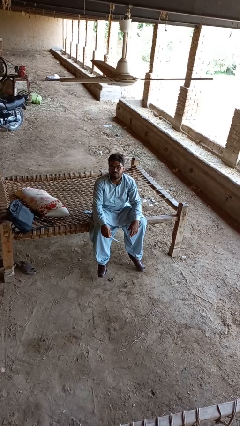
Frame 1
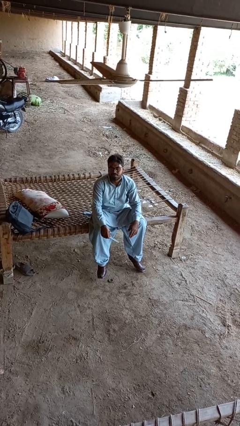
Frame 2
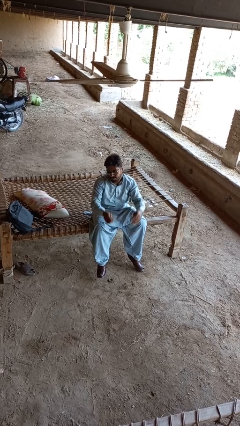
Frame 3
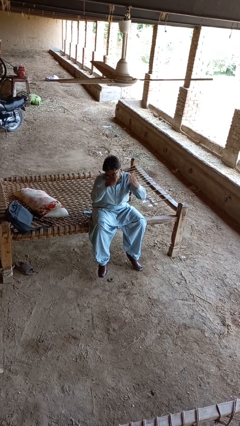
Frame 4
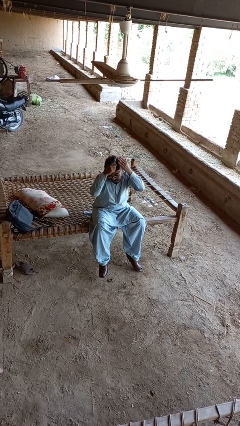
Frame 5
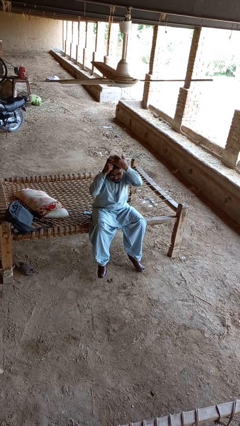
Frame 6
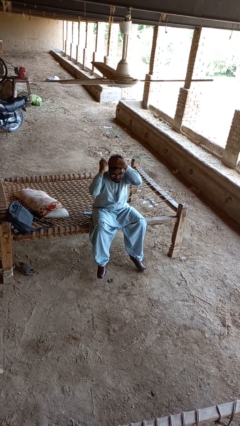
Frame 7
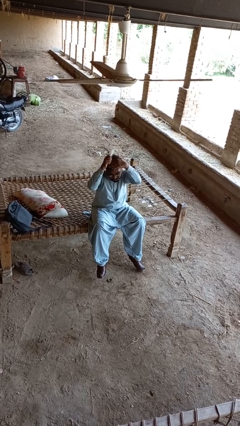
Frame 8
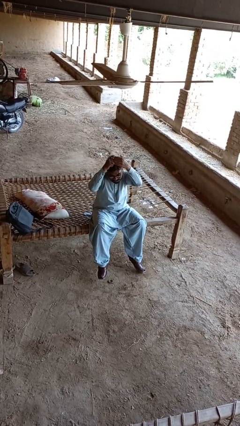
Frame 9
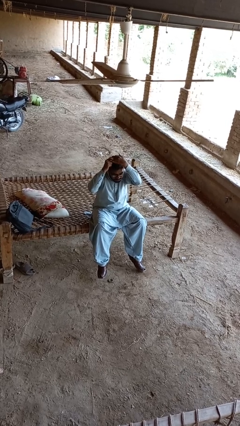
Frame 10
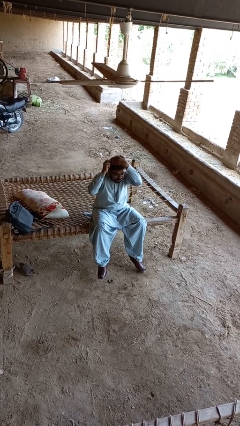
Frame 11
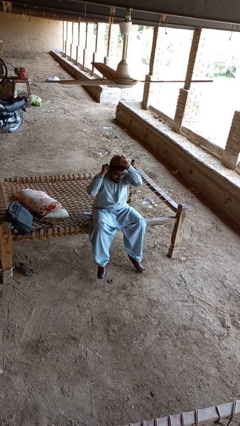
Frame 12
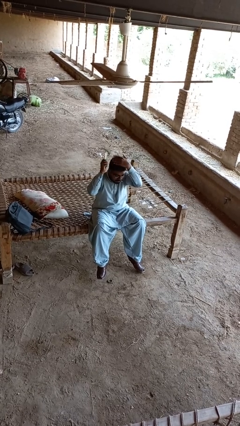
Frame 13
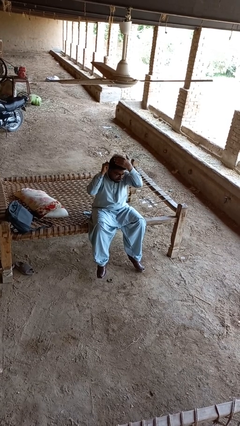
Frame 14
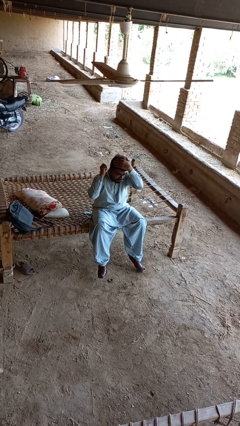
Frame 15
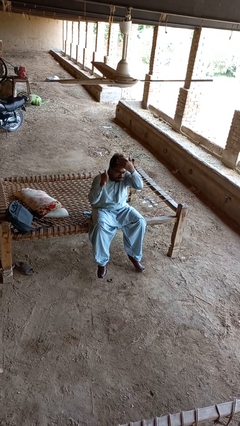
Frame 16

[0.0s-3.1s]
person brushes hair

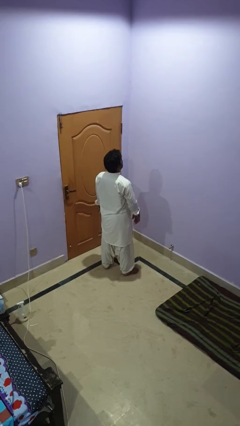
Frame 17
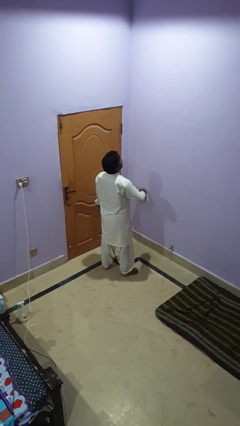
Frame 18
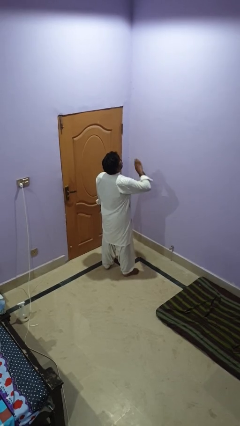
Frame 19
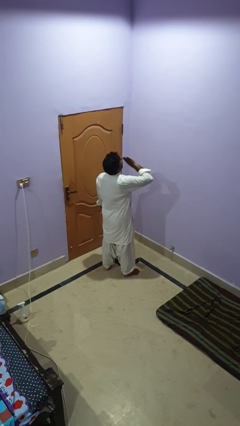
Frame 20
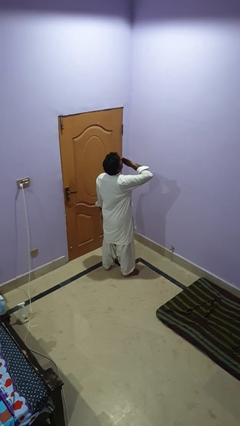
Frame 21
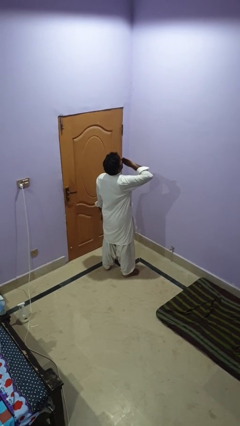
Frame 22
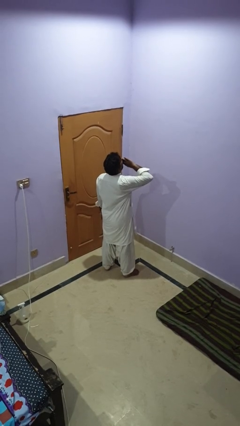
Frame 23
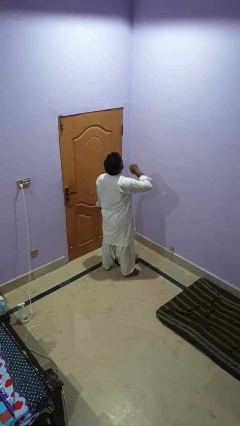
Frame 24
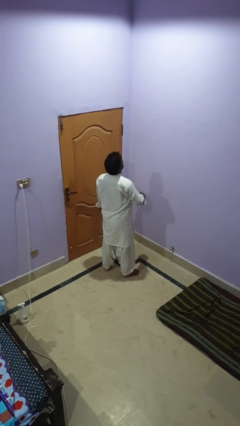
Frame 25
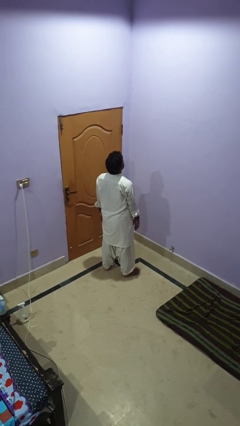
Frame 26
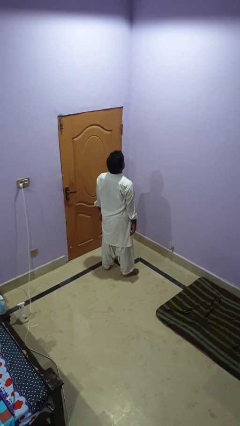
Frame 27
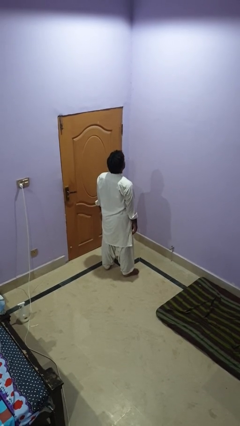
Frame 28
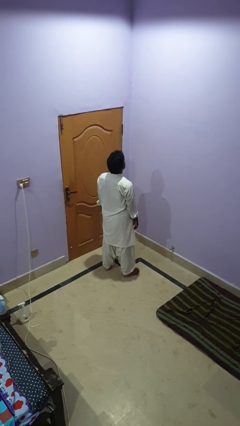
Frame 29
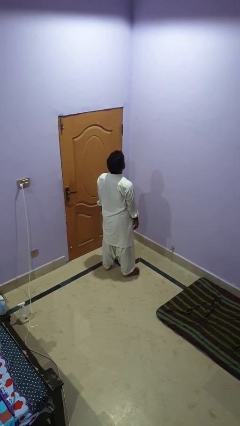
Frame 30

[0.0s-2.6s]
person yawns

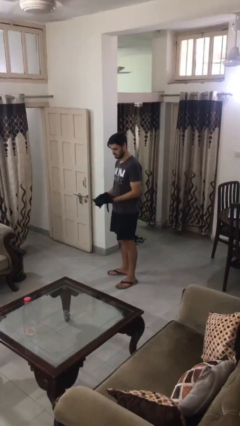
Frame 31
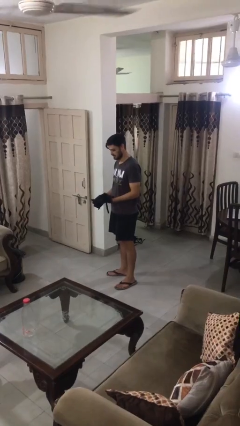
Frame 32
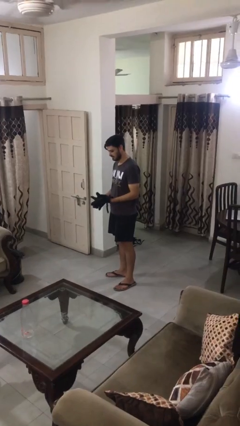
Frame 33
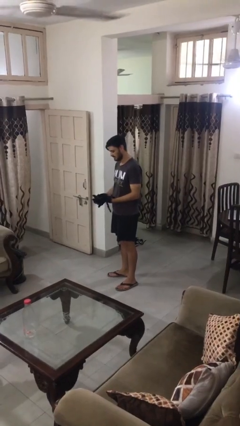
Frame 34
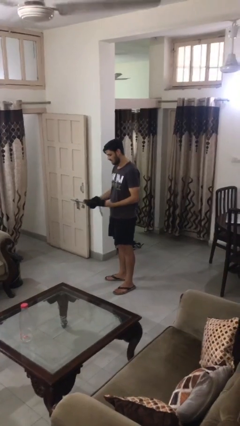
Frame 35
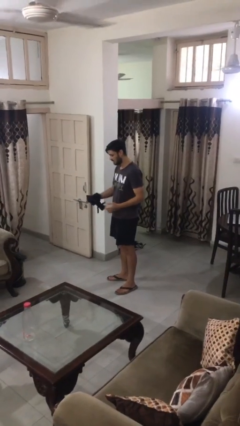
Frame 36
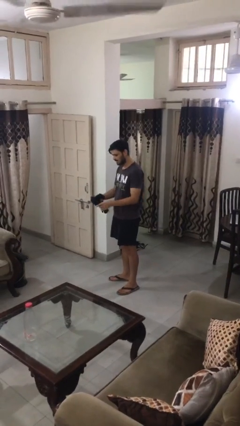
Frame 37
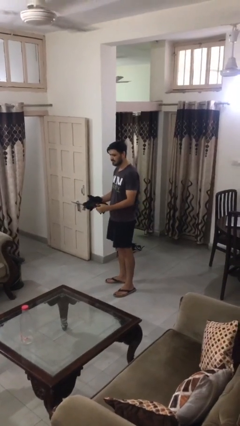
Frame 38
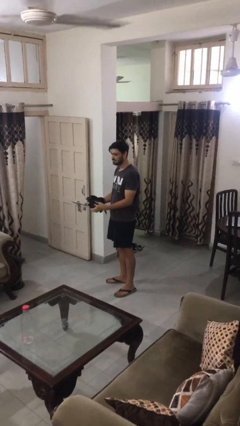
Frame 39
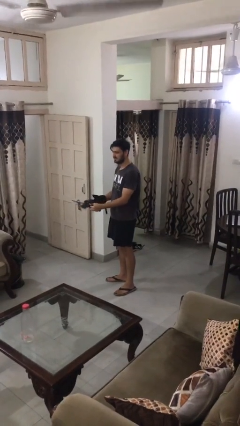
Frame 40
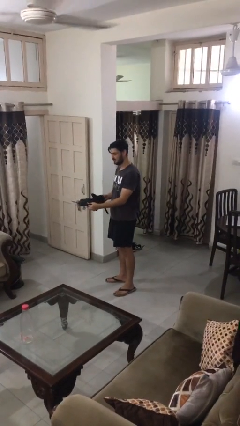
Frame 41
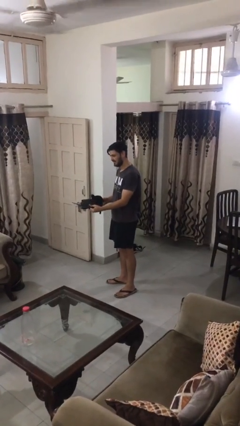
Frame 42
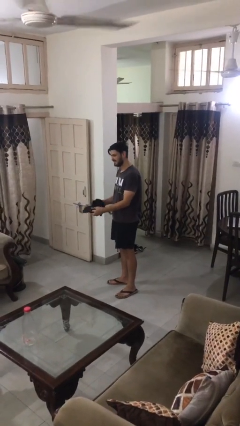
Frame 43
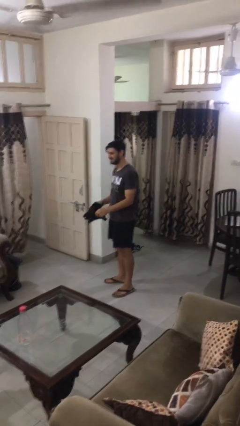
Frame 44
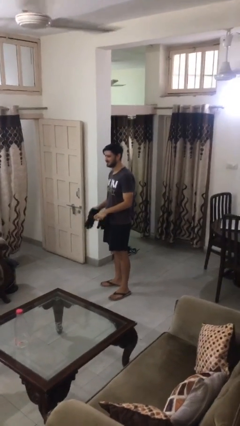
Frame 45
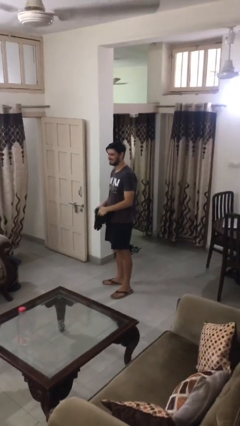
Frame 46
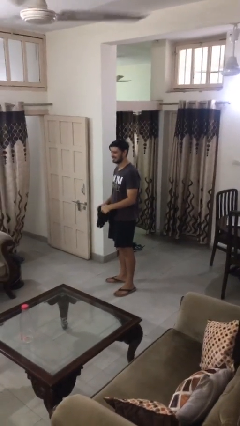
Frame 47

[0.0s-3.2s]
person takes off gloves

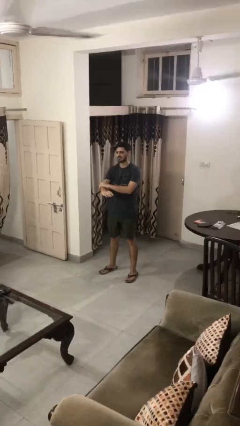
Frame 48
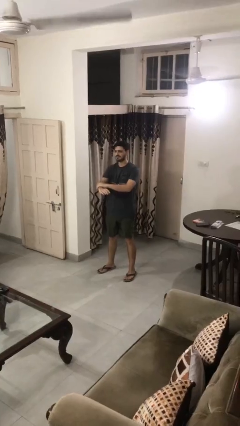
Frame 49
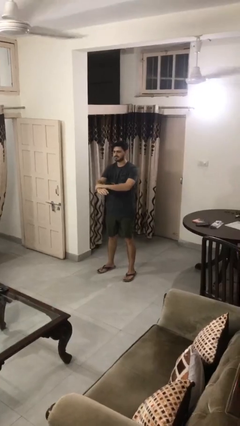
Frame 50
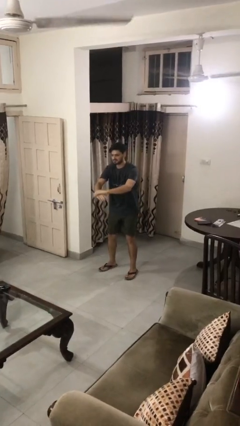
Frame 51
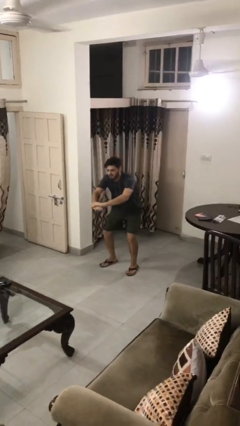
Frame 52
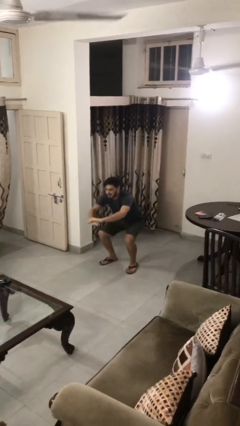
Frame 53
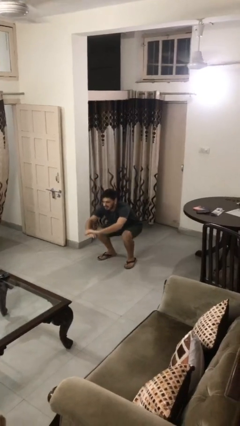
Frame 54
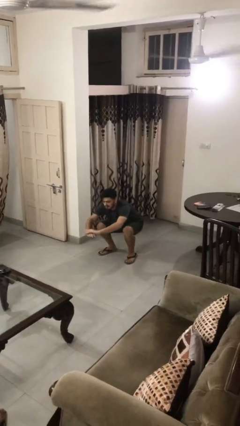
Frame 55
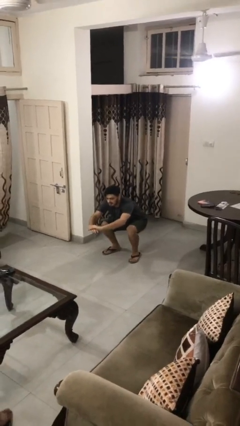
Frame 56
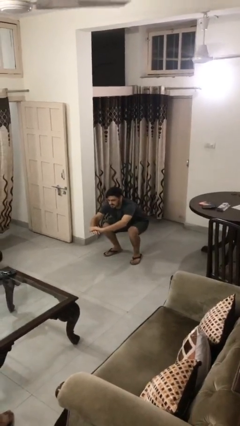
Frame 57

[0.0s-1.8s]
person squats

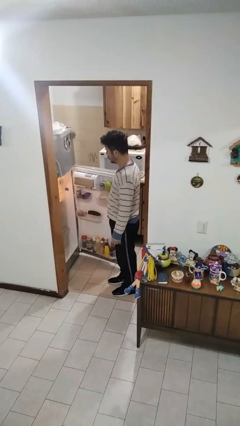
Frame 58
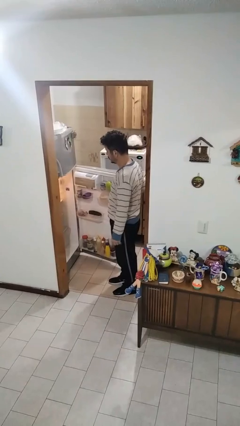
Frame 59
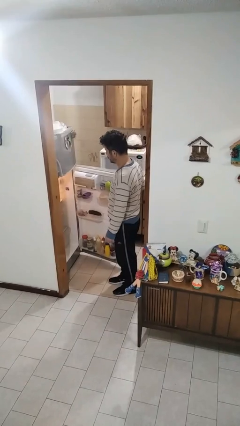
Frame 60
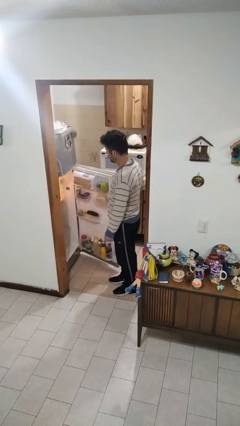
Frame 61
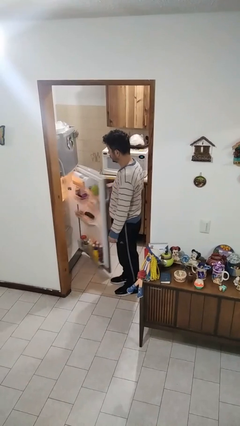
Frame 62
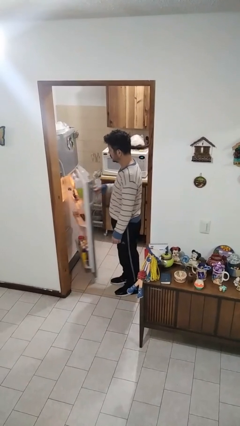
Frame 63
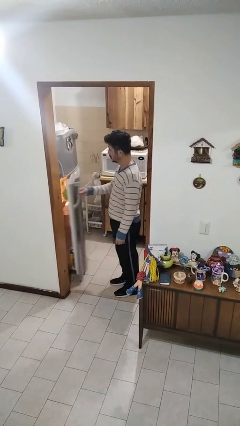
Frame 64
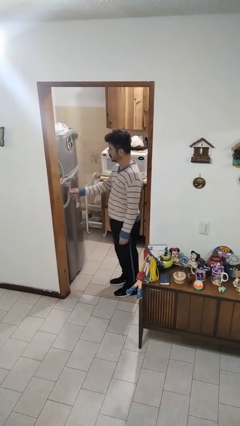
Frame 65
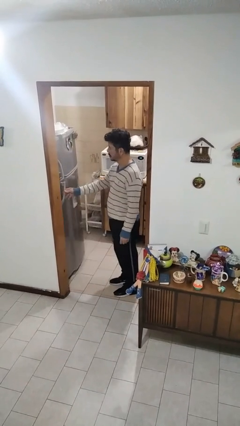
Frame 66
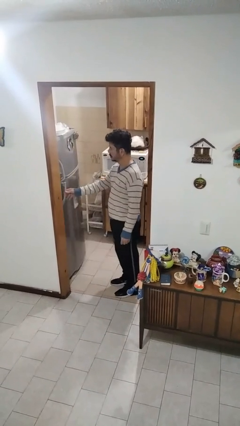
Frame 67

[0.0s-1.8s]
person closes refrigerator

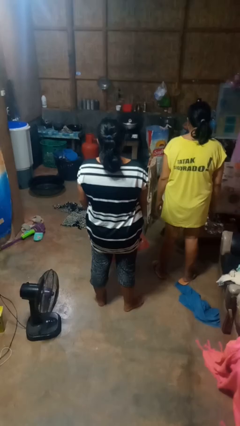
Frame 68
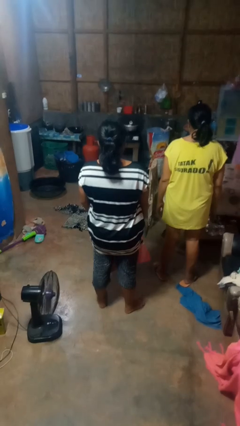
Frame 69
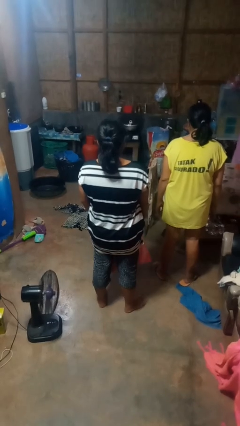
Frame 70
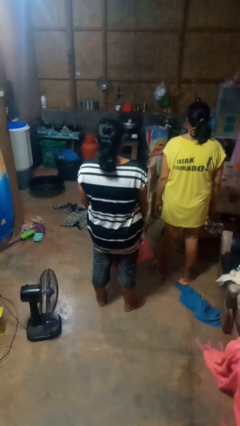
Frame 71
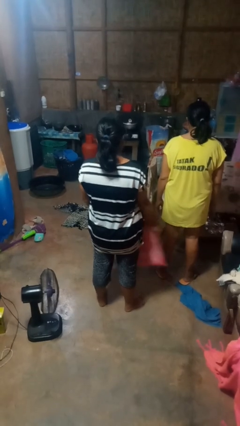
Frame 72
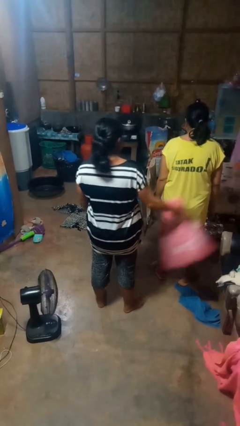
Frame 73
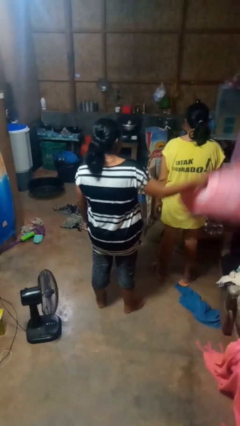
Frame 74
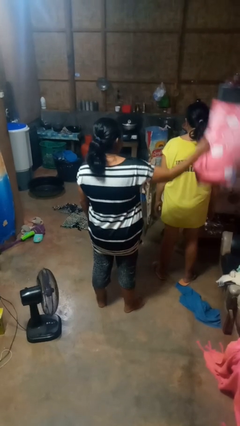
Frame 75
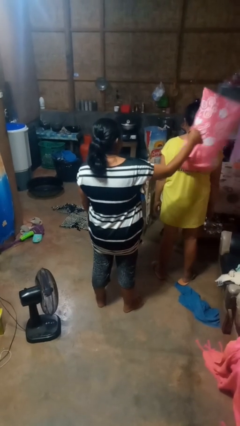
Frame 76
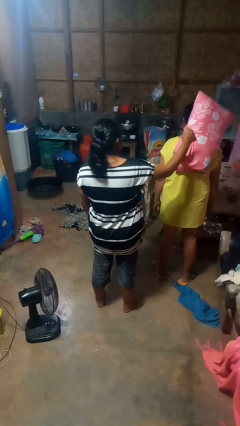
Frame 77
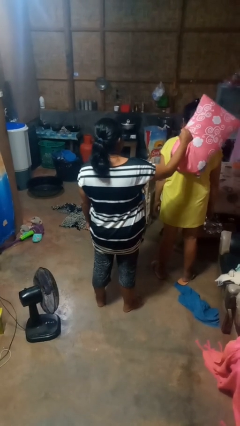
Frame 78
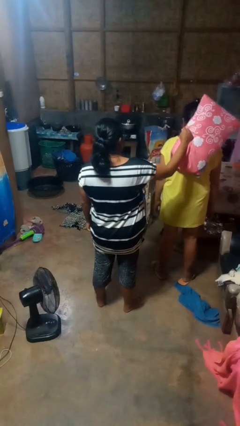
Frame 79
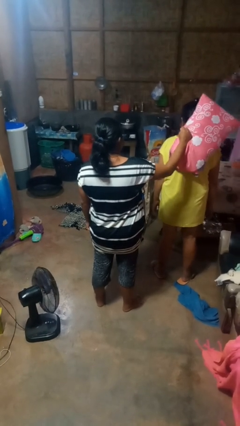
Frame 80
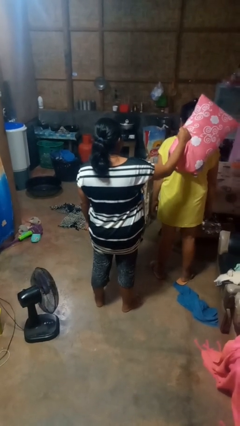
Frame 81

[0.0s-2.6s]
person hits person with pillow

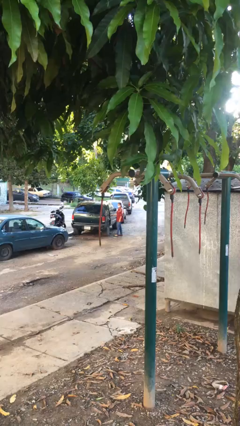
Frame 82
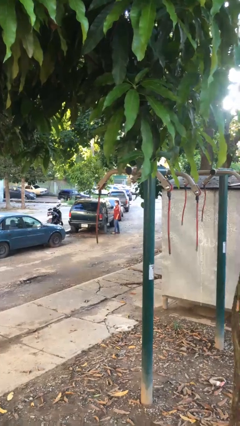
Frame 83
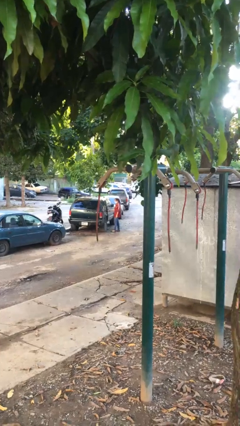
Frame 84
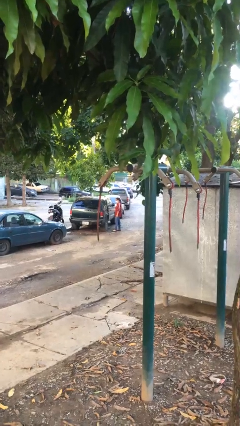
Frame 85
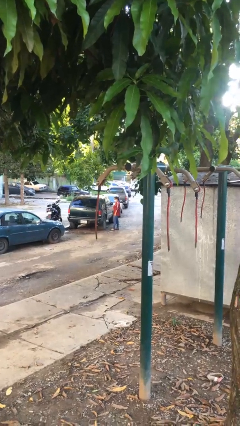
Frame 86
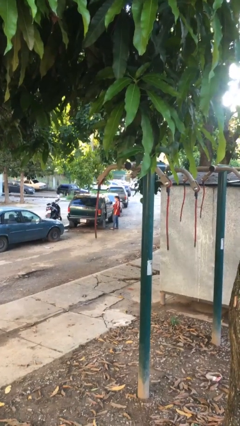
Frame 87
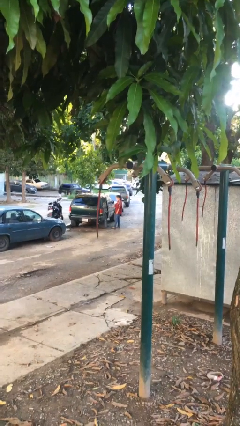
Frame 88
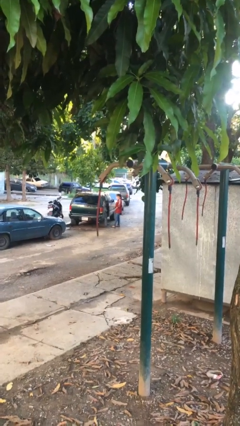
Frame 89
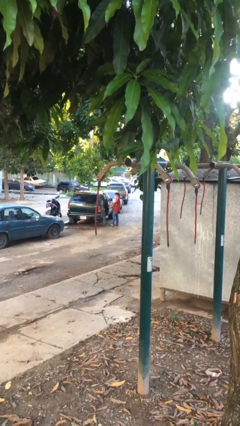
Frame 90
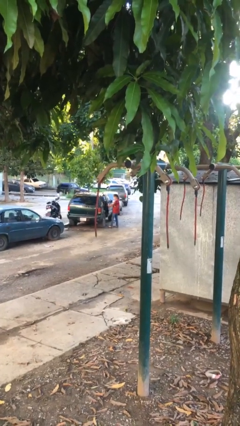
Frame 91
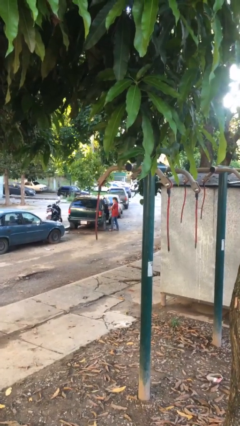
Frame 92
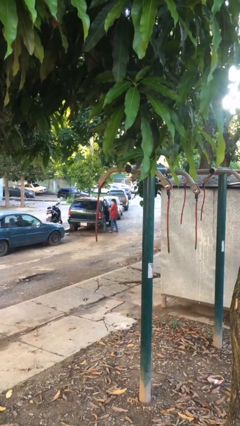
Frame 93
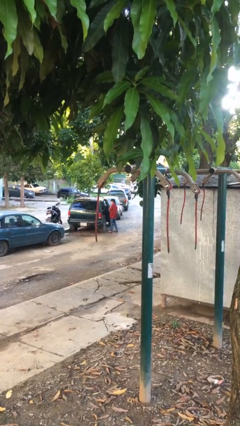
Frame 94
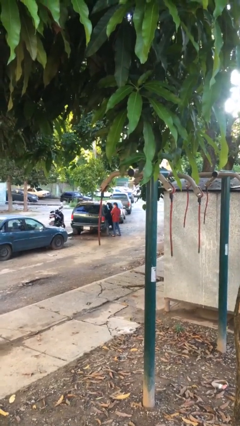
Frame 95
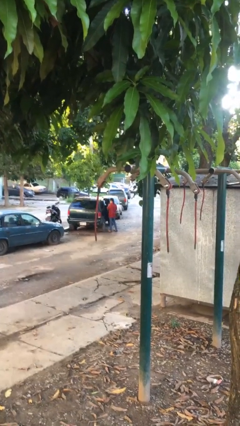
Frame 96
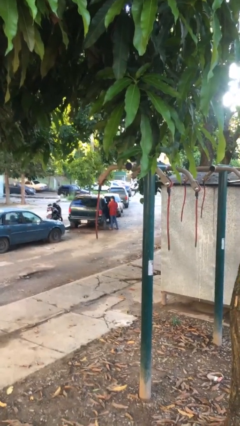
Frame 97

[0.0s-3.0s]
person opens car door
